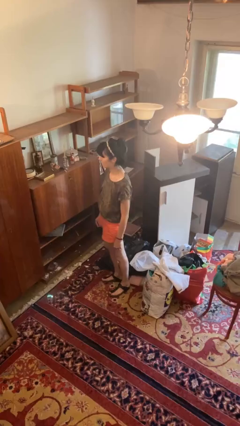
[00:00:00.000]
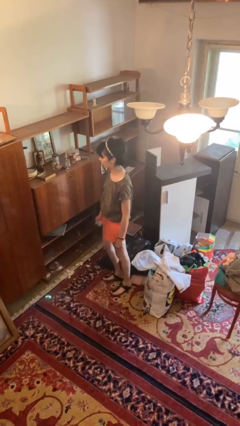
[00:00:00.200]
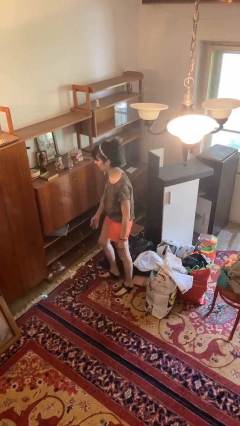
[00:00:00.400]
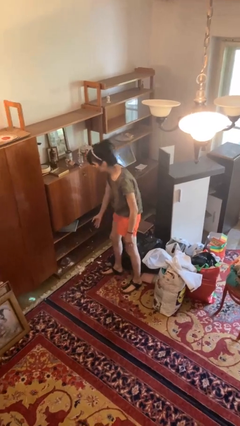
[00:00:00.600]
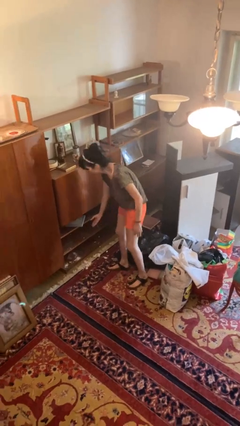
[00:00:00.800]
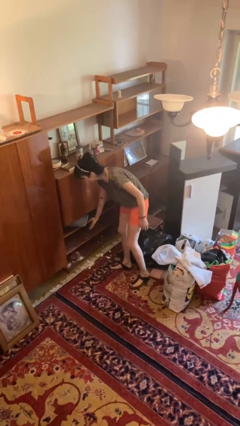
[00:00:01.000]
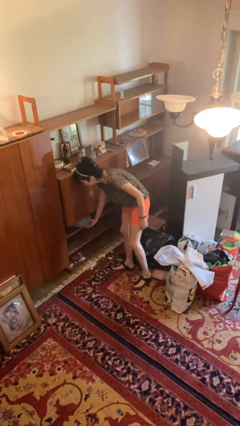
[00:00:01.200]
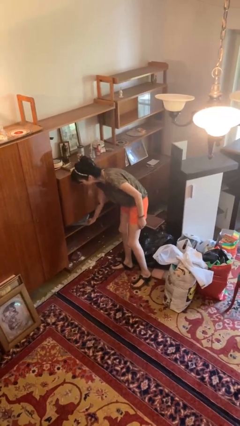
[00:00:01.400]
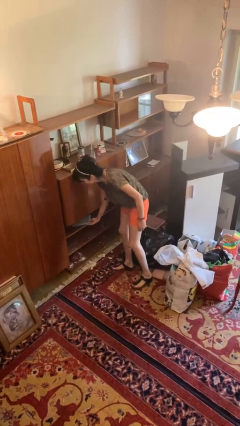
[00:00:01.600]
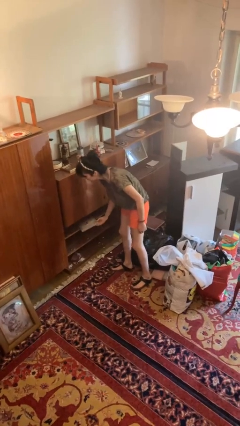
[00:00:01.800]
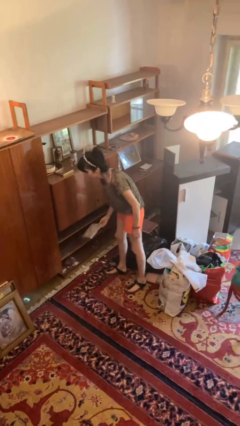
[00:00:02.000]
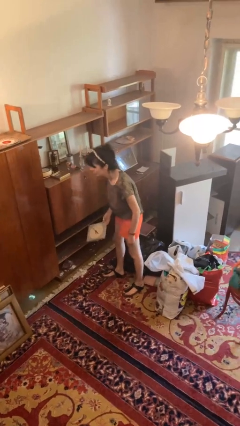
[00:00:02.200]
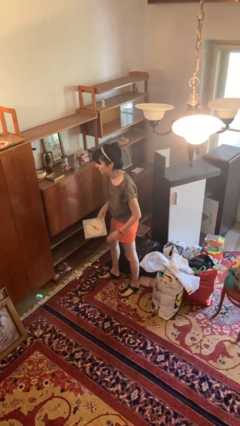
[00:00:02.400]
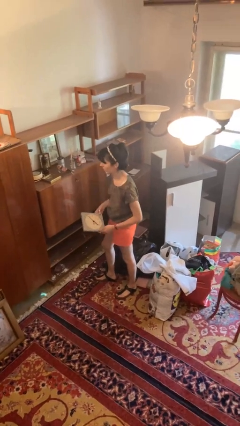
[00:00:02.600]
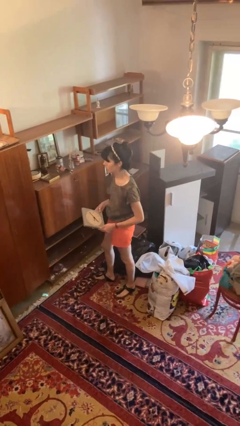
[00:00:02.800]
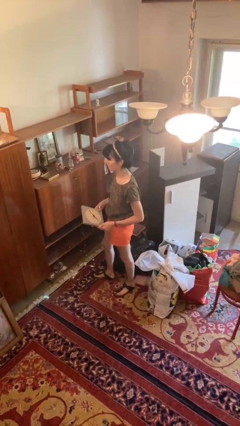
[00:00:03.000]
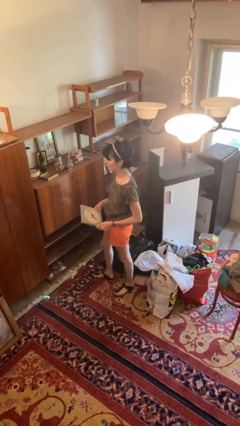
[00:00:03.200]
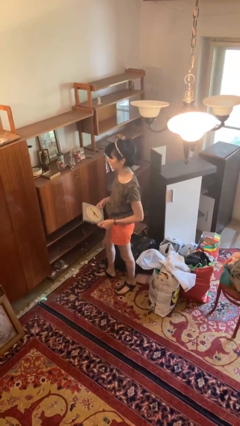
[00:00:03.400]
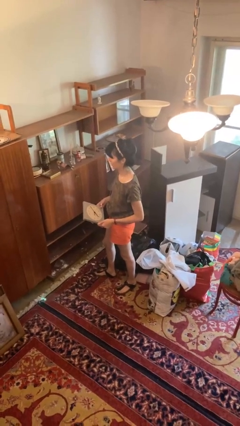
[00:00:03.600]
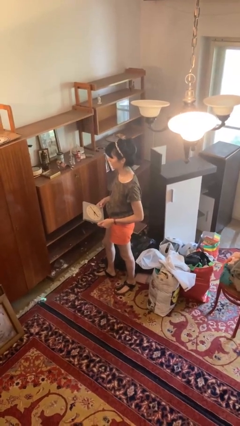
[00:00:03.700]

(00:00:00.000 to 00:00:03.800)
person picks up object from cabinet

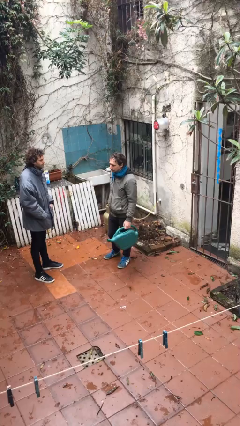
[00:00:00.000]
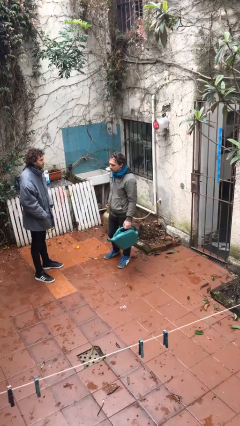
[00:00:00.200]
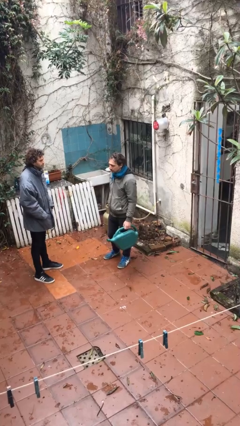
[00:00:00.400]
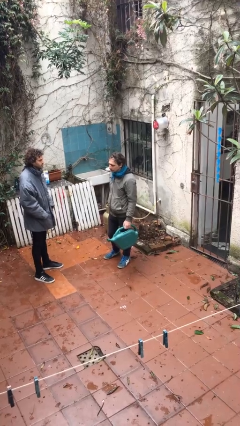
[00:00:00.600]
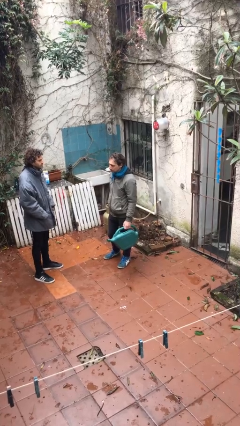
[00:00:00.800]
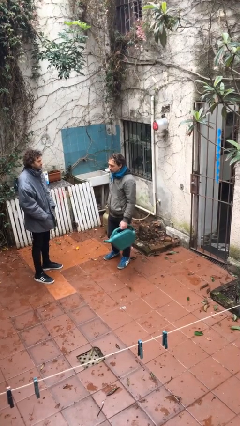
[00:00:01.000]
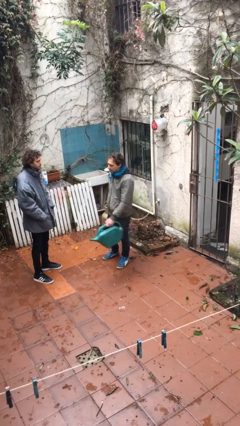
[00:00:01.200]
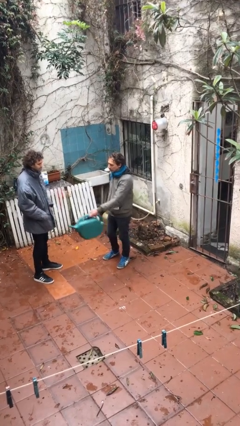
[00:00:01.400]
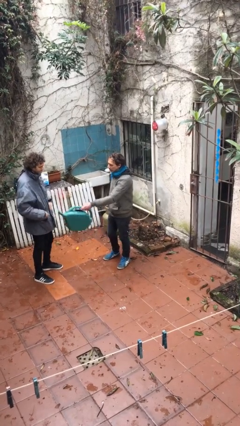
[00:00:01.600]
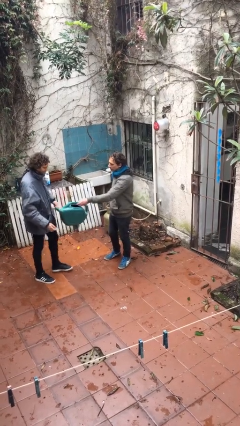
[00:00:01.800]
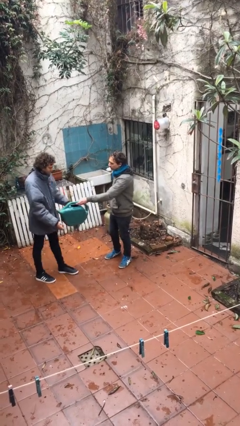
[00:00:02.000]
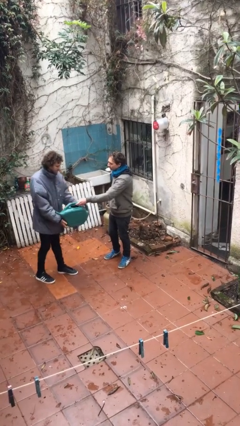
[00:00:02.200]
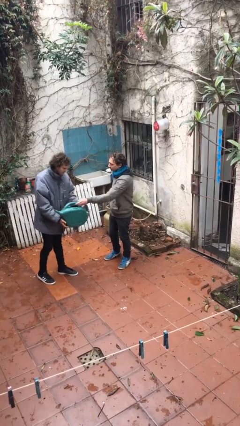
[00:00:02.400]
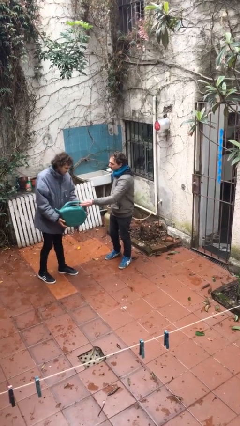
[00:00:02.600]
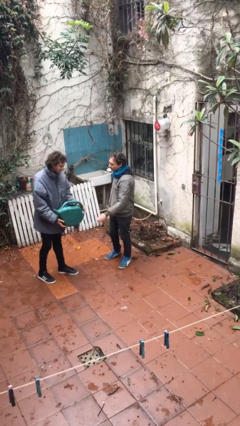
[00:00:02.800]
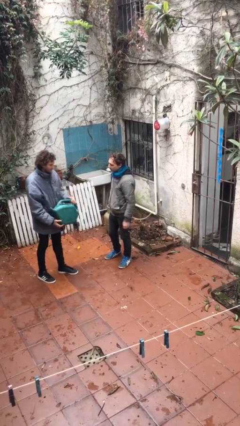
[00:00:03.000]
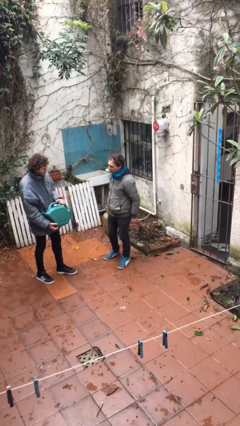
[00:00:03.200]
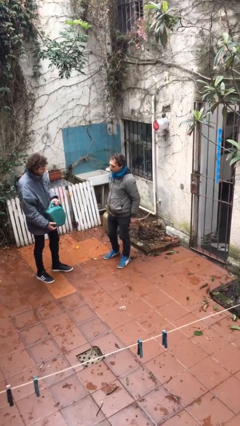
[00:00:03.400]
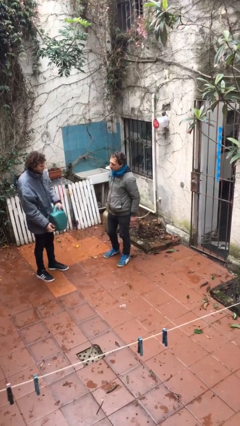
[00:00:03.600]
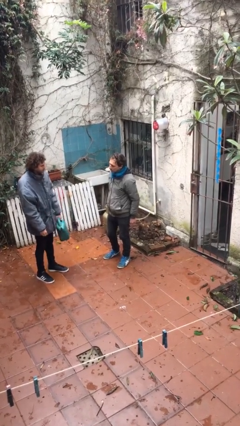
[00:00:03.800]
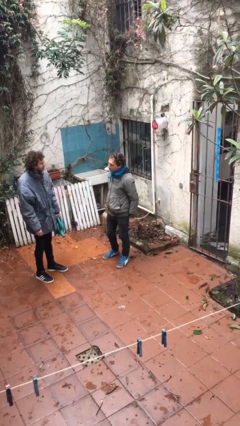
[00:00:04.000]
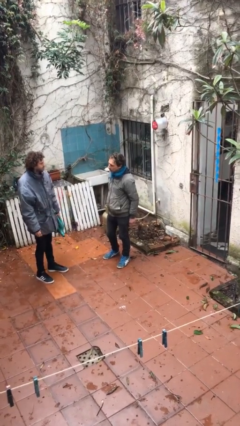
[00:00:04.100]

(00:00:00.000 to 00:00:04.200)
person transfers object to person

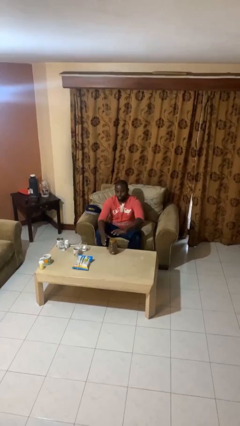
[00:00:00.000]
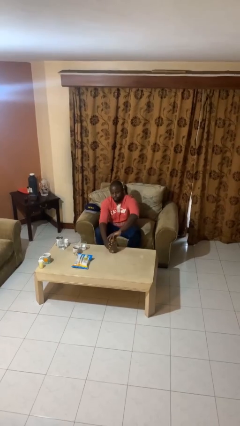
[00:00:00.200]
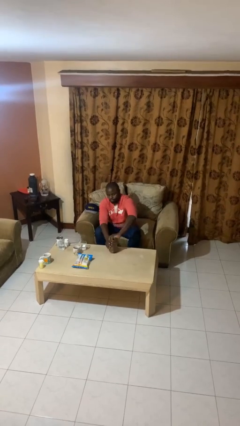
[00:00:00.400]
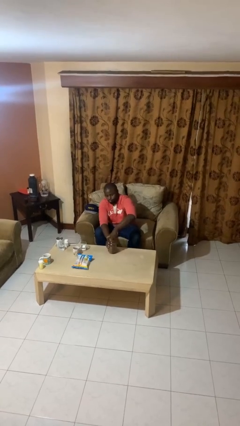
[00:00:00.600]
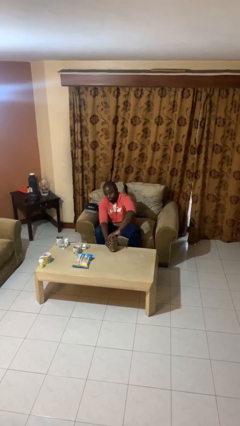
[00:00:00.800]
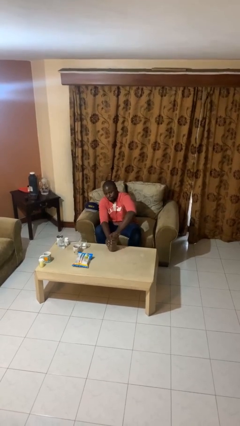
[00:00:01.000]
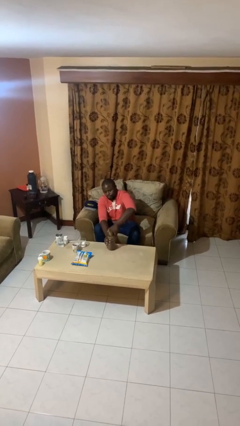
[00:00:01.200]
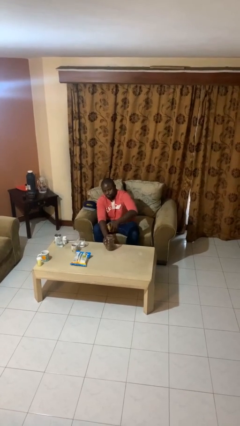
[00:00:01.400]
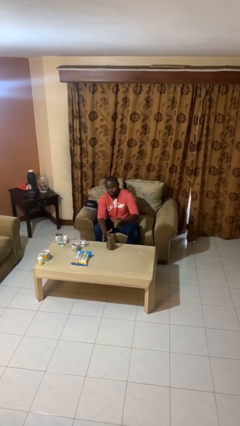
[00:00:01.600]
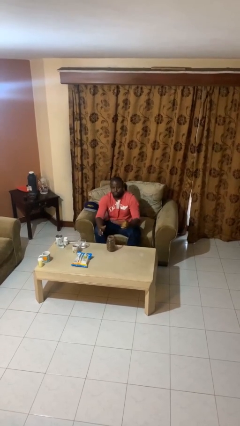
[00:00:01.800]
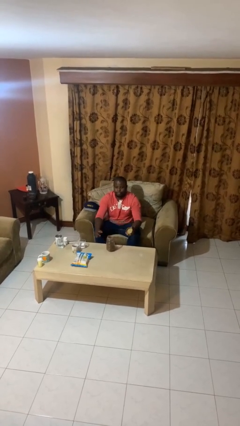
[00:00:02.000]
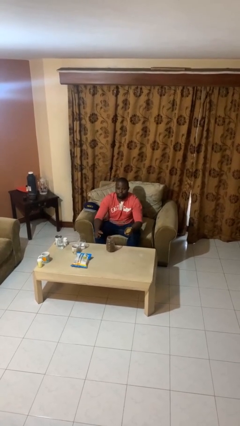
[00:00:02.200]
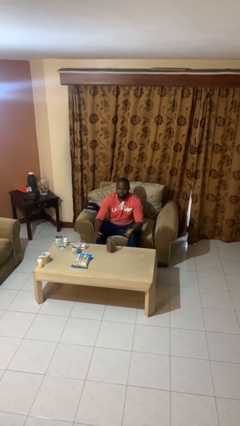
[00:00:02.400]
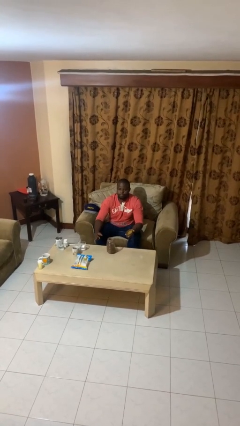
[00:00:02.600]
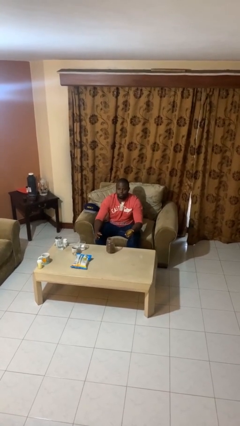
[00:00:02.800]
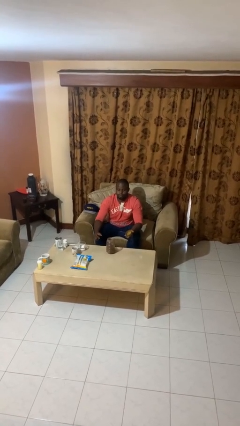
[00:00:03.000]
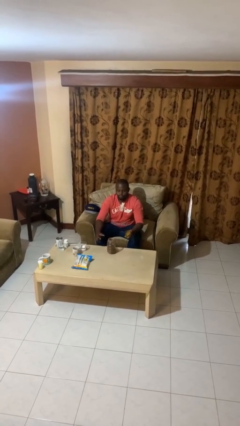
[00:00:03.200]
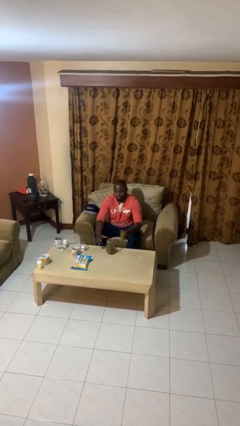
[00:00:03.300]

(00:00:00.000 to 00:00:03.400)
person opens jar

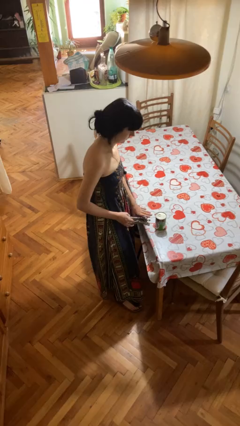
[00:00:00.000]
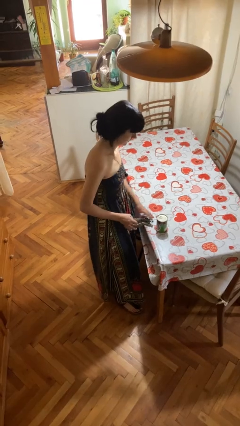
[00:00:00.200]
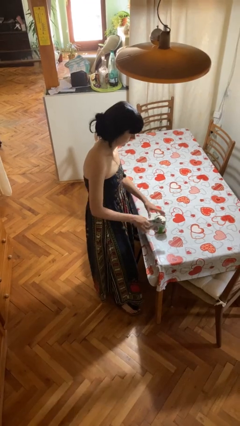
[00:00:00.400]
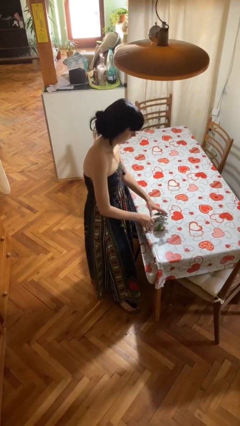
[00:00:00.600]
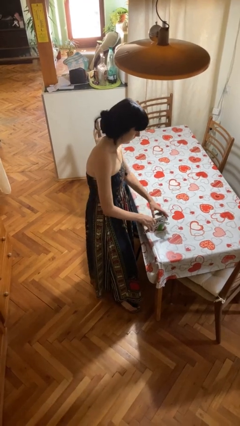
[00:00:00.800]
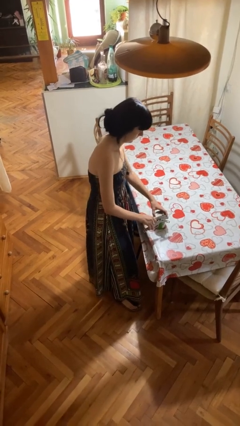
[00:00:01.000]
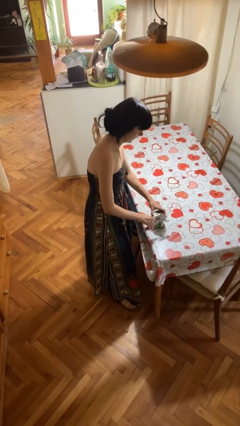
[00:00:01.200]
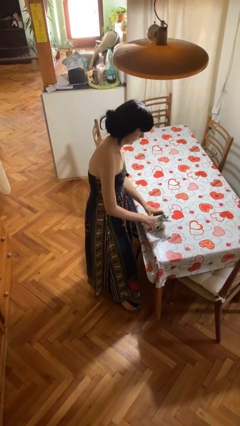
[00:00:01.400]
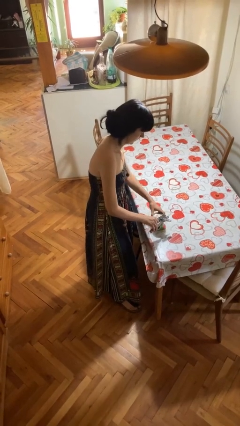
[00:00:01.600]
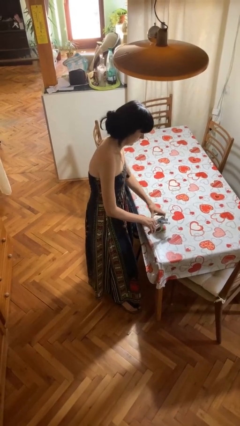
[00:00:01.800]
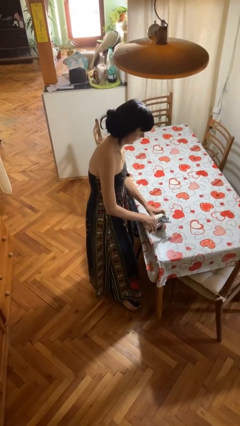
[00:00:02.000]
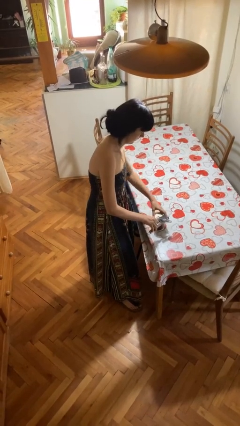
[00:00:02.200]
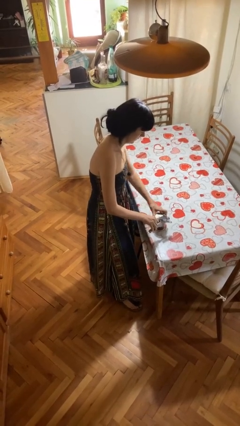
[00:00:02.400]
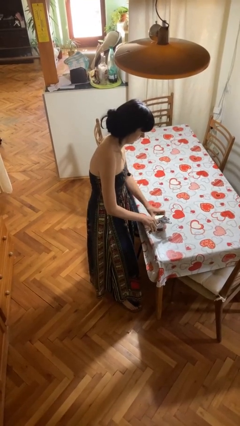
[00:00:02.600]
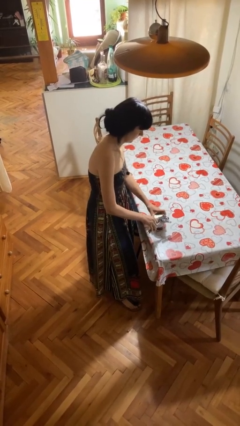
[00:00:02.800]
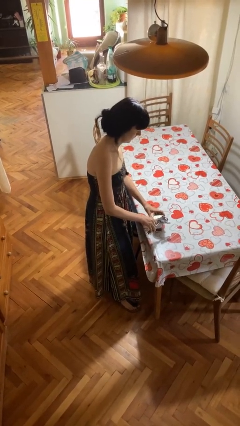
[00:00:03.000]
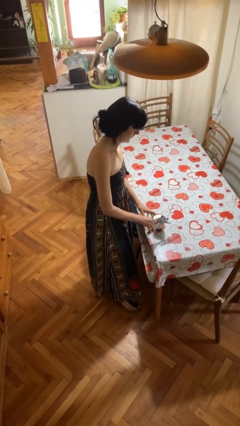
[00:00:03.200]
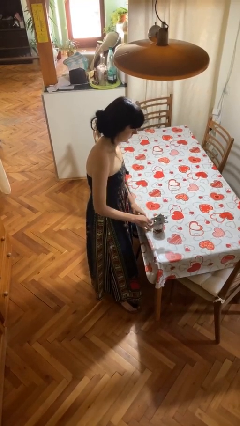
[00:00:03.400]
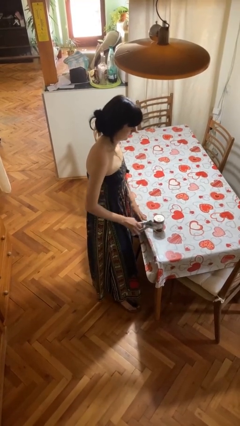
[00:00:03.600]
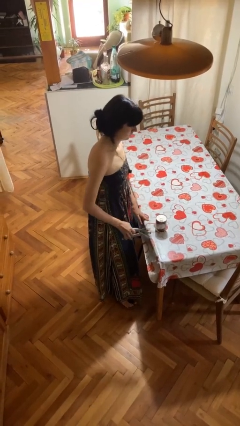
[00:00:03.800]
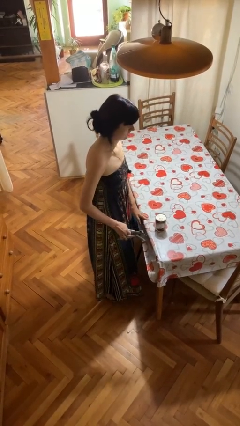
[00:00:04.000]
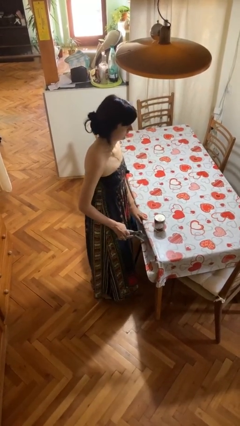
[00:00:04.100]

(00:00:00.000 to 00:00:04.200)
person opens can with can opener

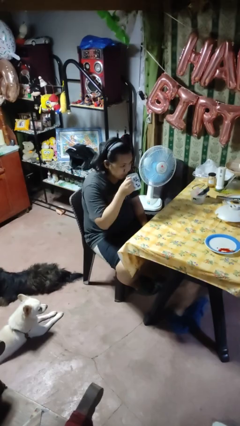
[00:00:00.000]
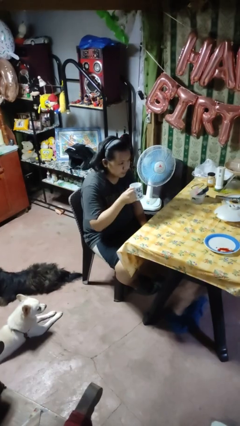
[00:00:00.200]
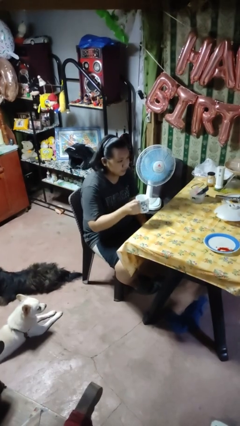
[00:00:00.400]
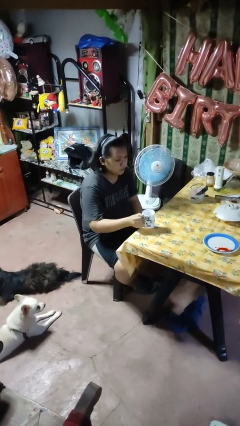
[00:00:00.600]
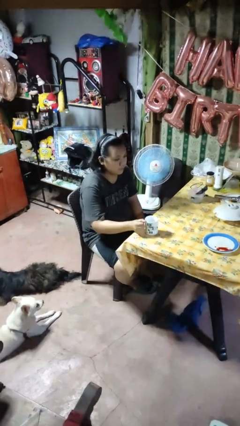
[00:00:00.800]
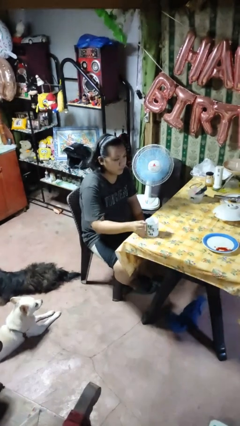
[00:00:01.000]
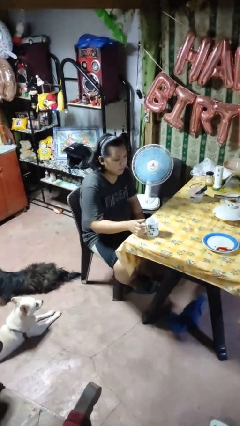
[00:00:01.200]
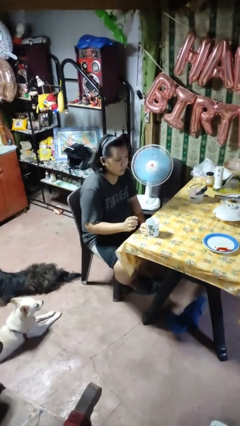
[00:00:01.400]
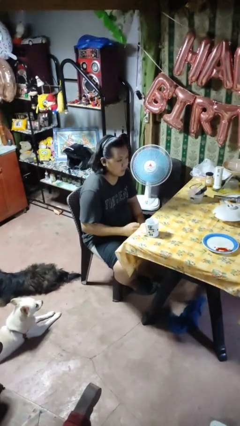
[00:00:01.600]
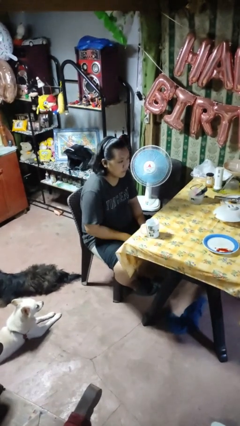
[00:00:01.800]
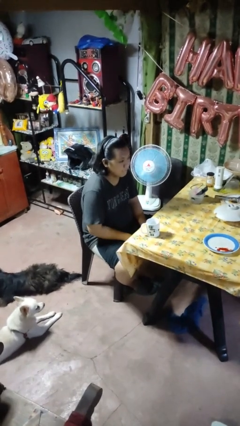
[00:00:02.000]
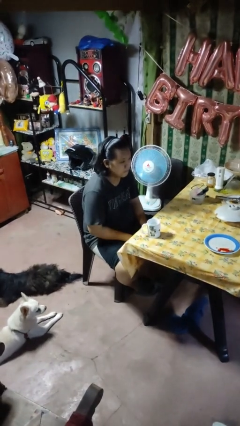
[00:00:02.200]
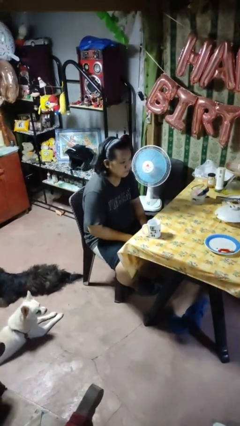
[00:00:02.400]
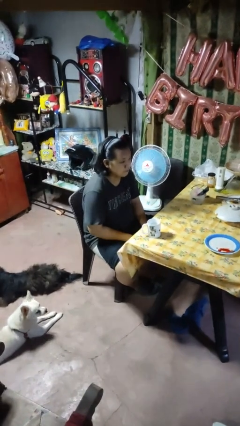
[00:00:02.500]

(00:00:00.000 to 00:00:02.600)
person puts down object on table
